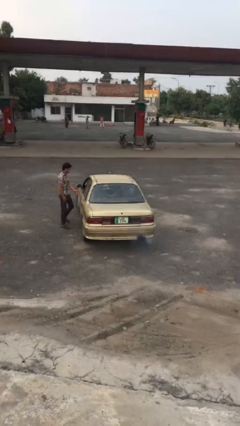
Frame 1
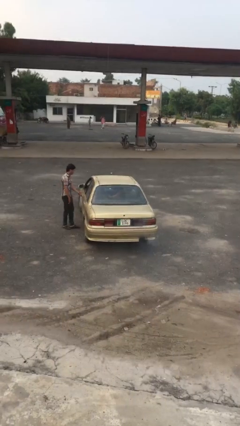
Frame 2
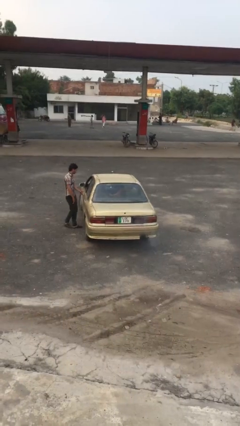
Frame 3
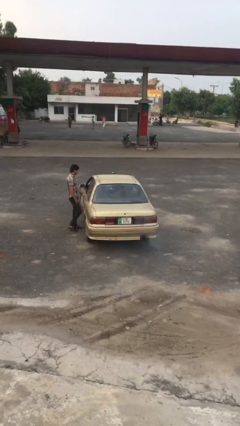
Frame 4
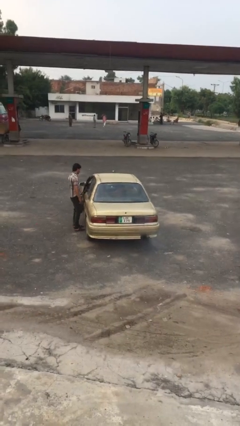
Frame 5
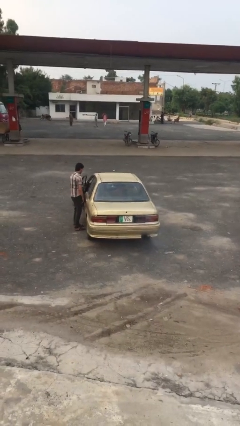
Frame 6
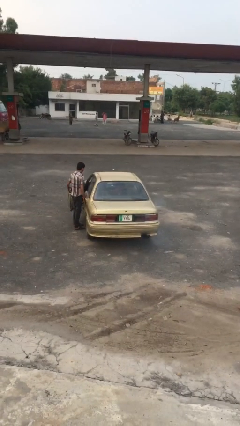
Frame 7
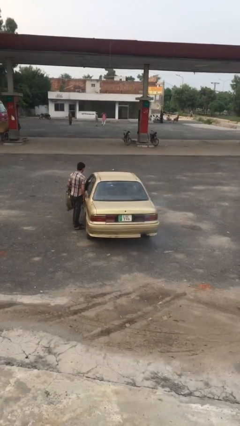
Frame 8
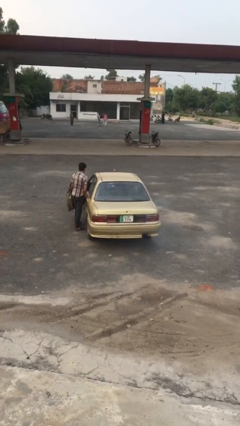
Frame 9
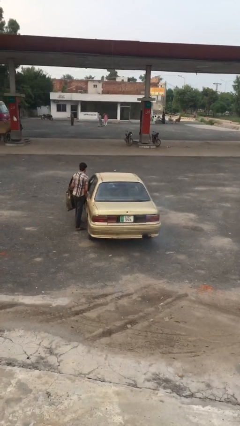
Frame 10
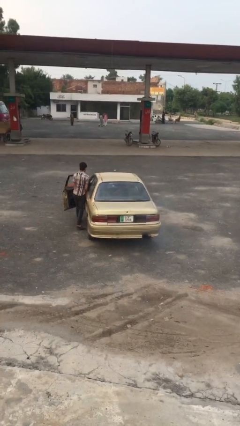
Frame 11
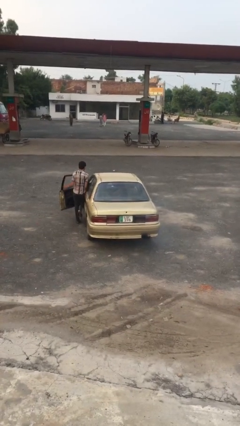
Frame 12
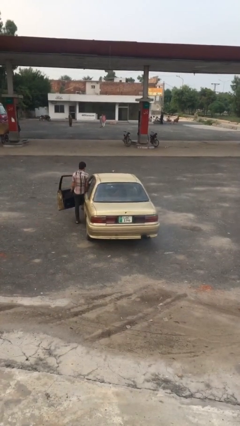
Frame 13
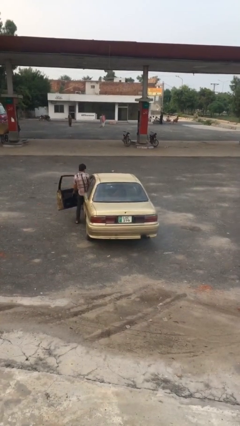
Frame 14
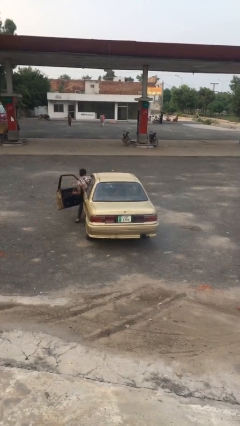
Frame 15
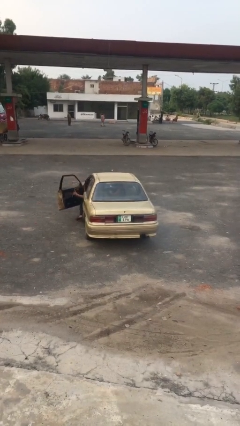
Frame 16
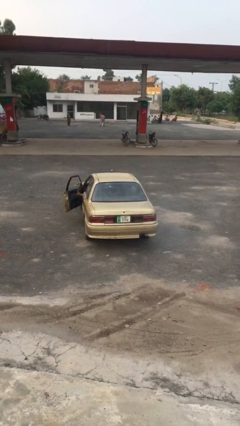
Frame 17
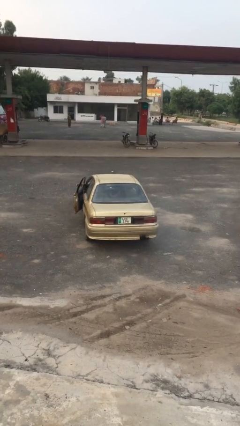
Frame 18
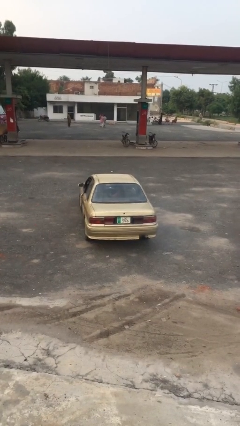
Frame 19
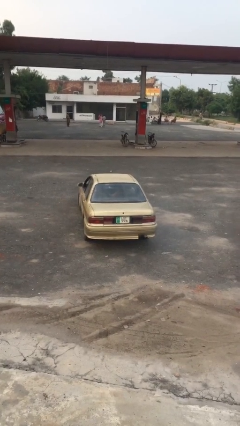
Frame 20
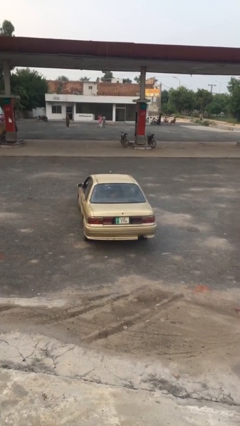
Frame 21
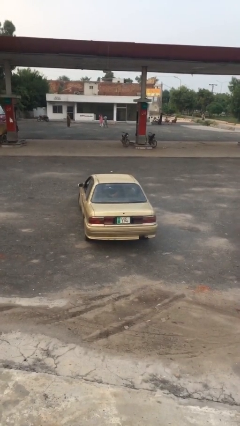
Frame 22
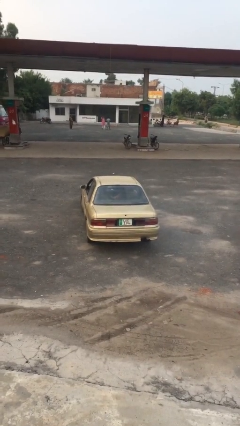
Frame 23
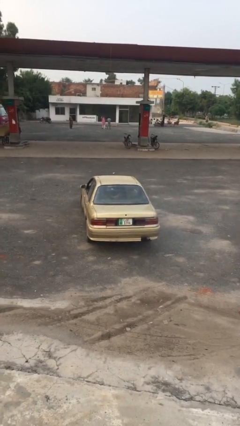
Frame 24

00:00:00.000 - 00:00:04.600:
car picks up person

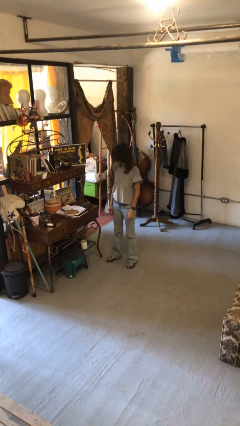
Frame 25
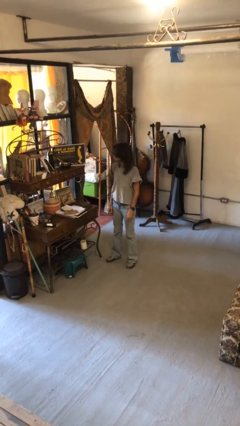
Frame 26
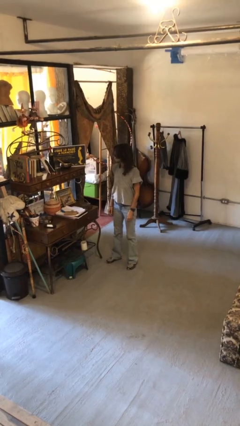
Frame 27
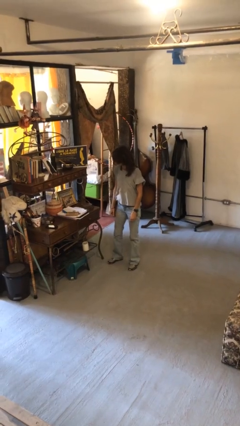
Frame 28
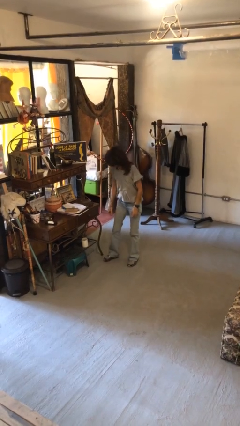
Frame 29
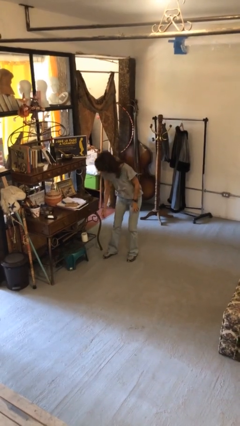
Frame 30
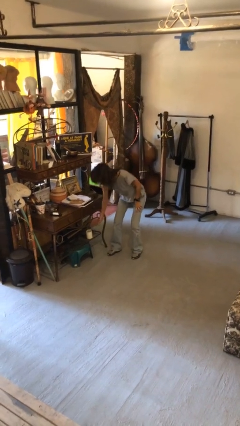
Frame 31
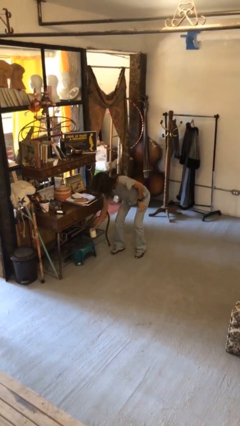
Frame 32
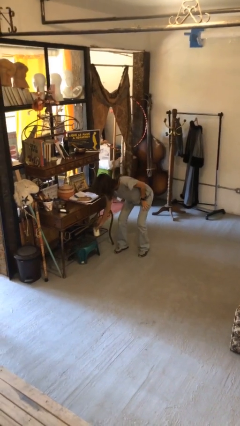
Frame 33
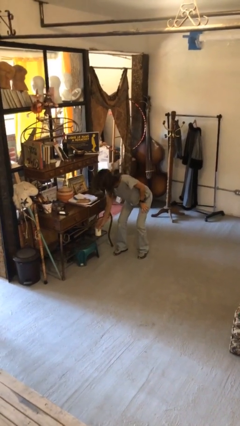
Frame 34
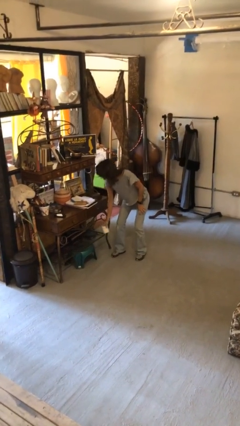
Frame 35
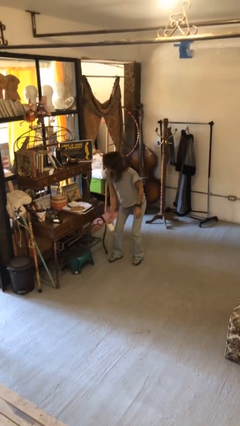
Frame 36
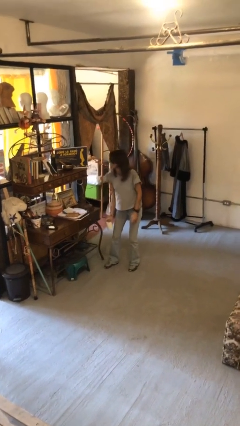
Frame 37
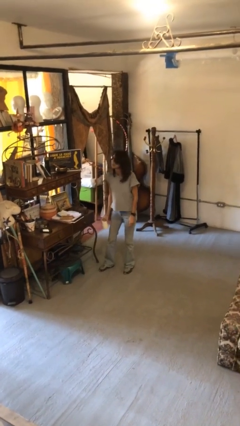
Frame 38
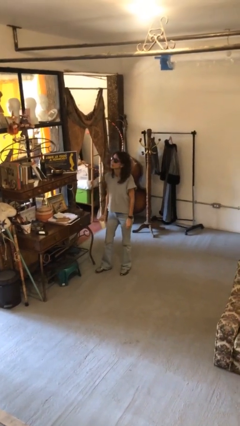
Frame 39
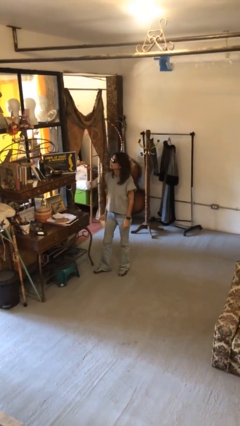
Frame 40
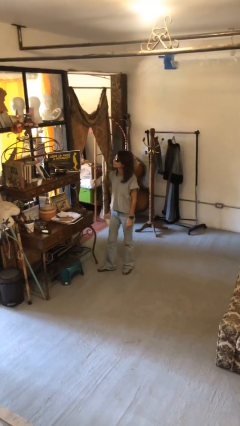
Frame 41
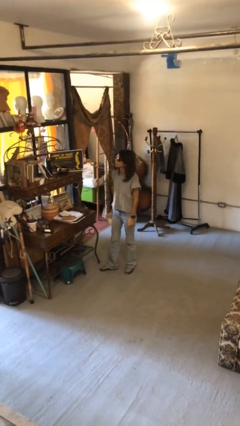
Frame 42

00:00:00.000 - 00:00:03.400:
person picks up object from cabinet

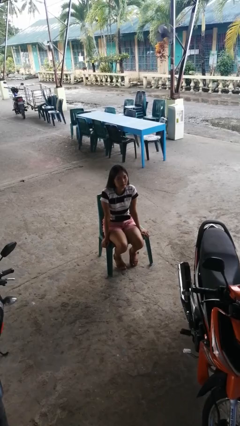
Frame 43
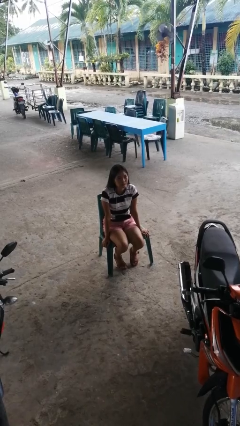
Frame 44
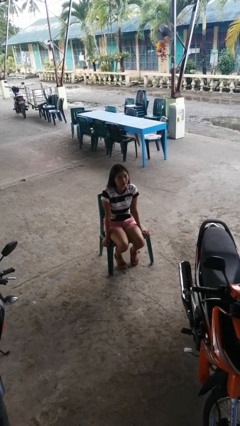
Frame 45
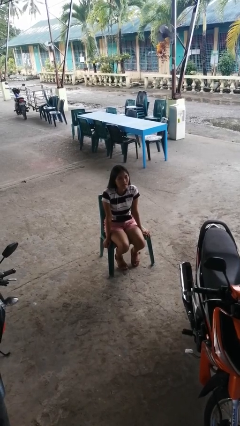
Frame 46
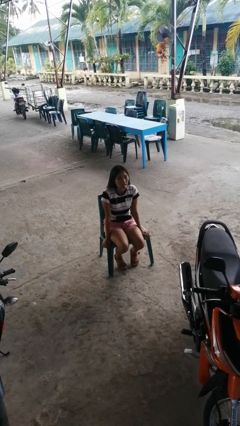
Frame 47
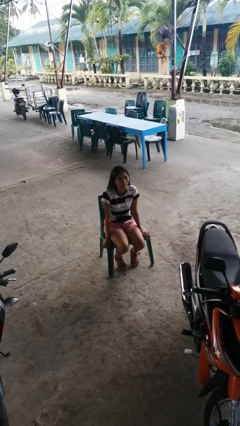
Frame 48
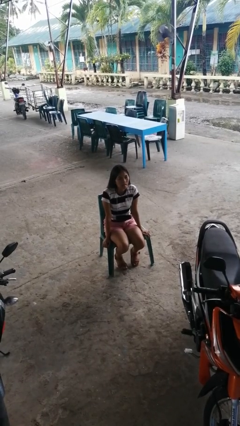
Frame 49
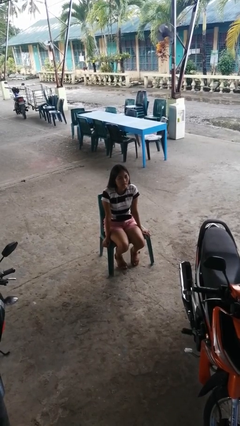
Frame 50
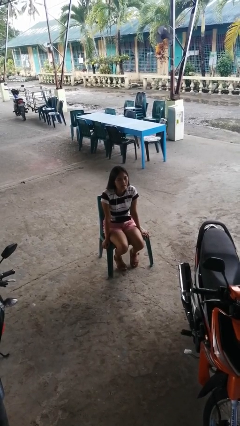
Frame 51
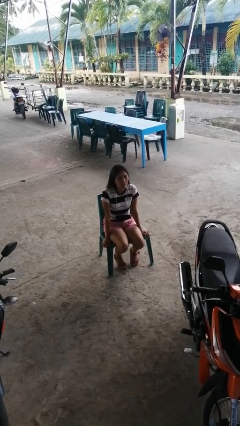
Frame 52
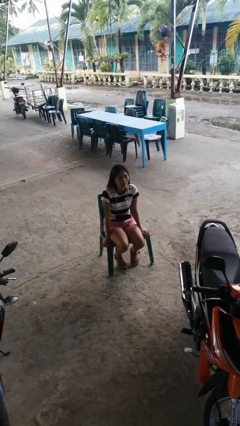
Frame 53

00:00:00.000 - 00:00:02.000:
person sticks out tongue

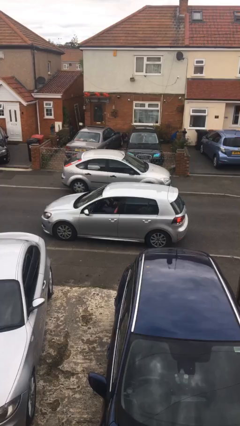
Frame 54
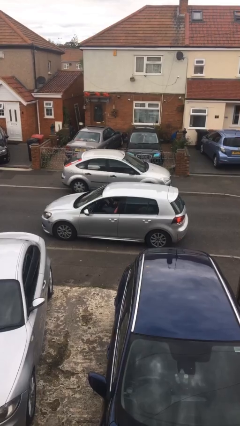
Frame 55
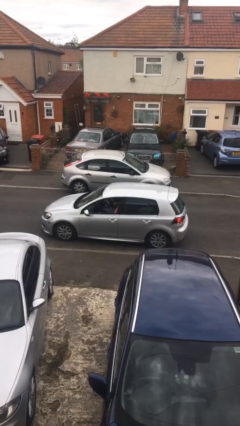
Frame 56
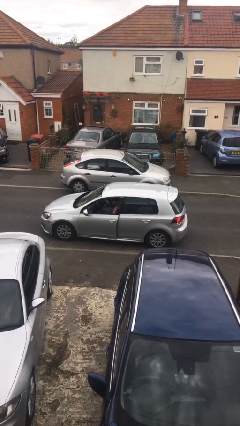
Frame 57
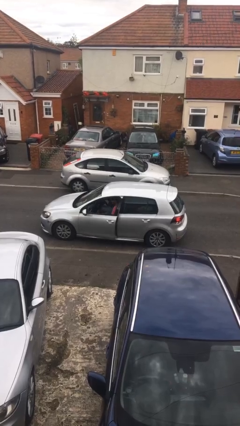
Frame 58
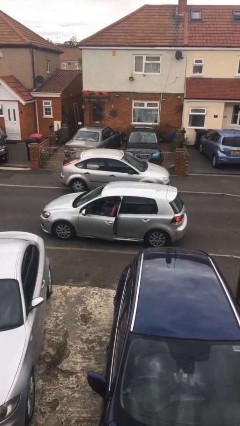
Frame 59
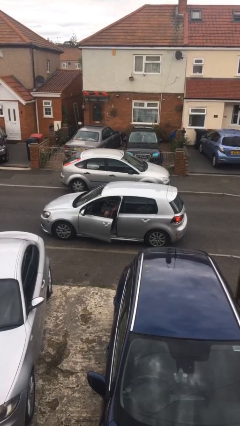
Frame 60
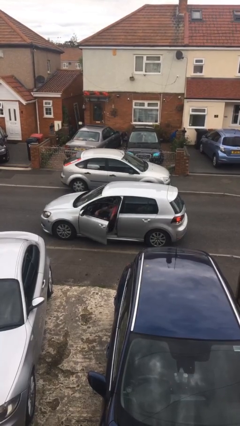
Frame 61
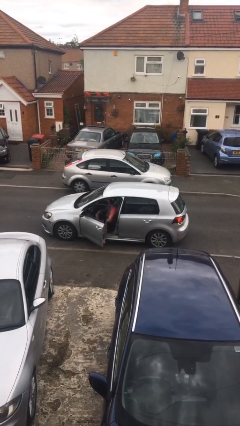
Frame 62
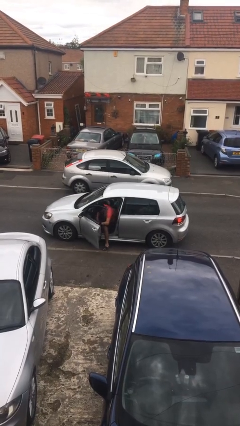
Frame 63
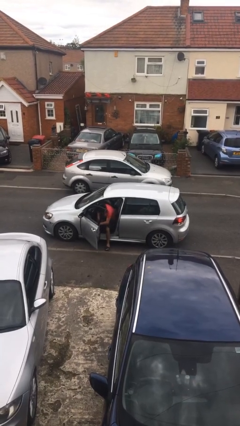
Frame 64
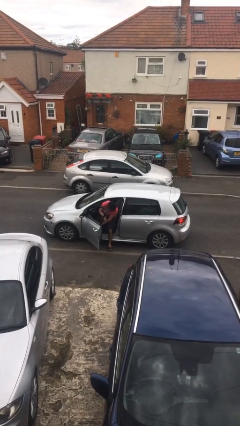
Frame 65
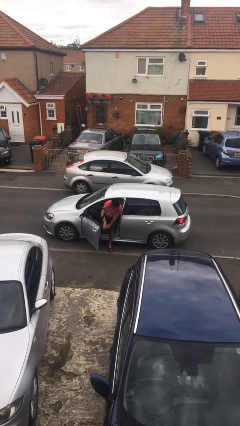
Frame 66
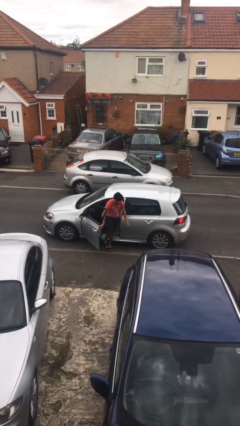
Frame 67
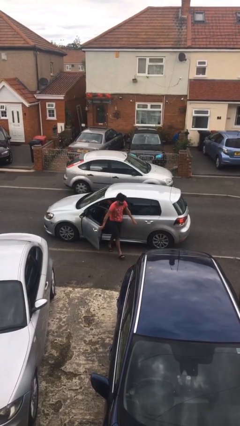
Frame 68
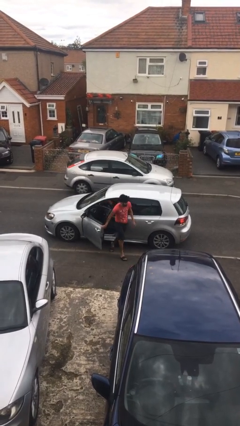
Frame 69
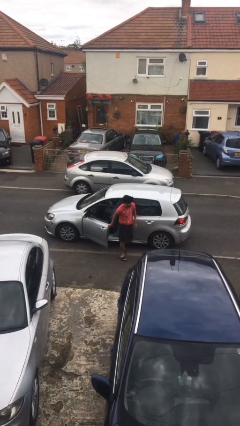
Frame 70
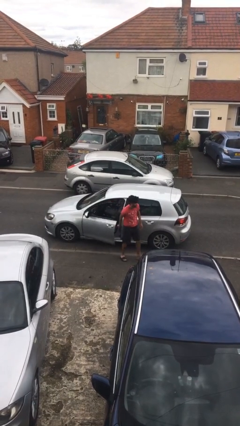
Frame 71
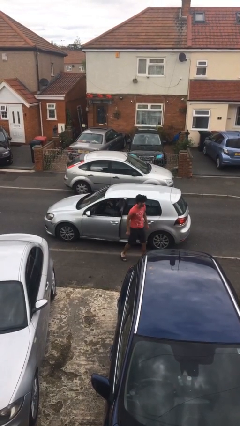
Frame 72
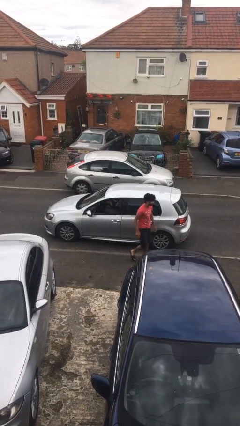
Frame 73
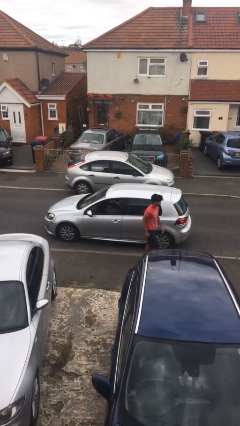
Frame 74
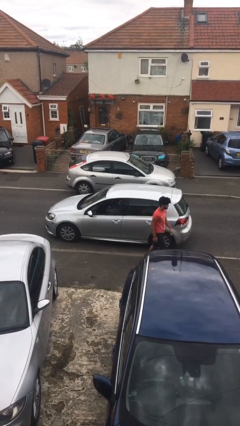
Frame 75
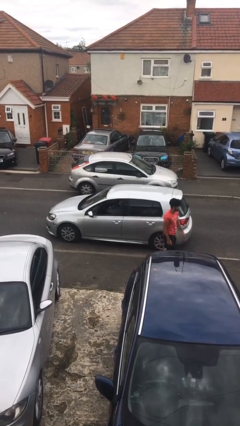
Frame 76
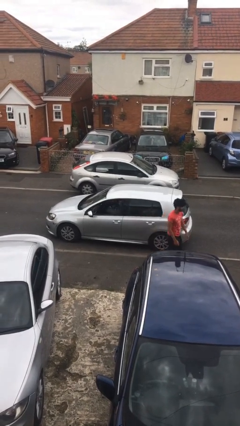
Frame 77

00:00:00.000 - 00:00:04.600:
car drops off person

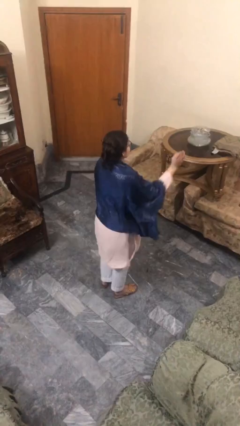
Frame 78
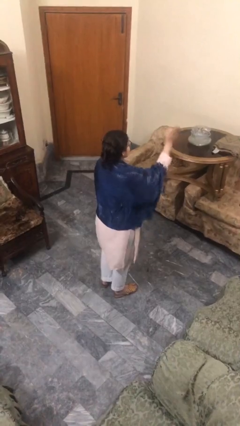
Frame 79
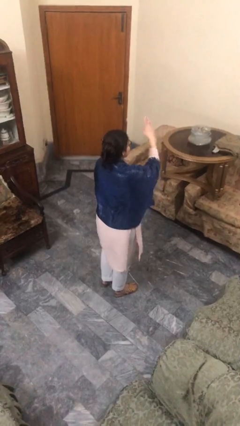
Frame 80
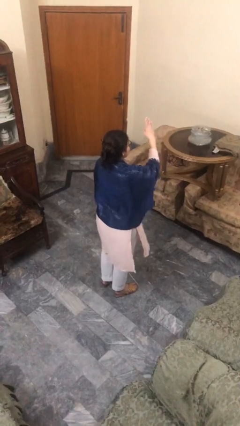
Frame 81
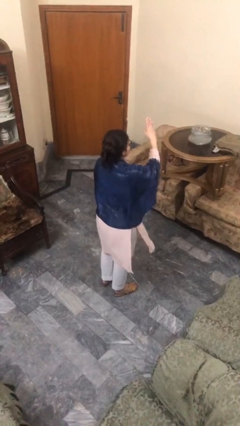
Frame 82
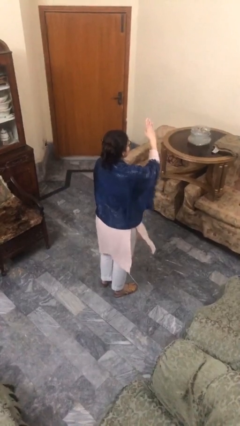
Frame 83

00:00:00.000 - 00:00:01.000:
person gestures swipe left

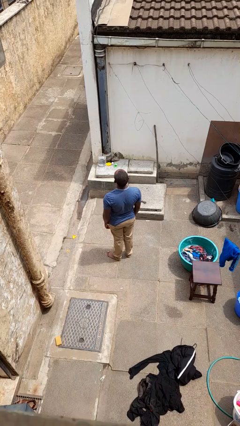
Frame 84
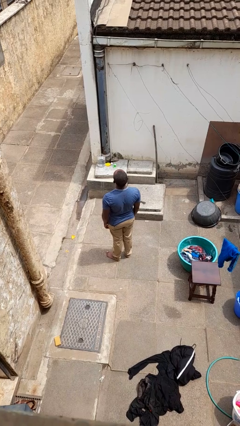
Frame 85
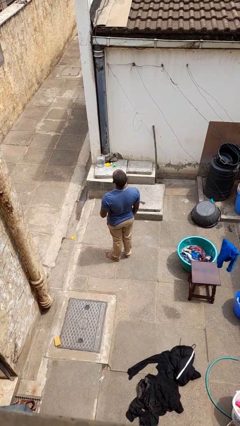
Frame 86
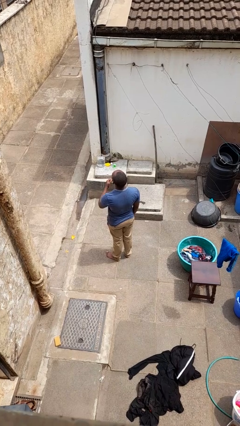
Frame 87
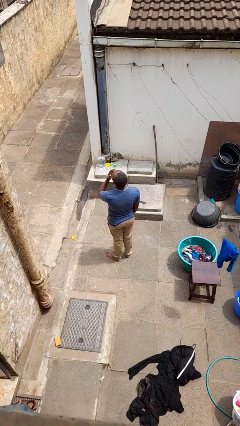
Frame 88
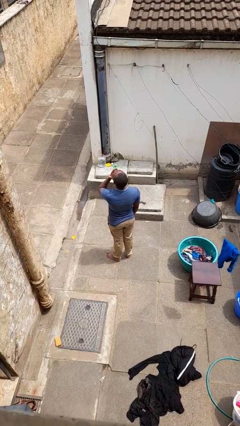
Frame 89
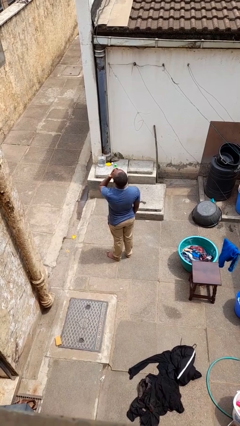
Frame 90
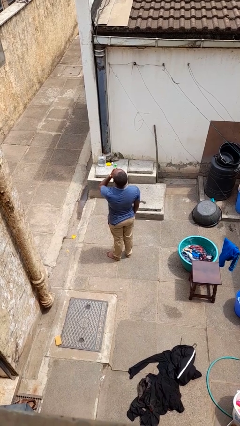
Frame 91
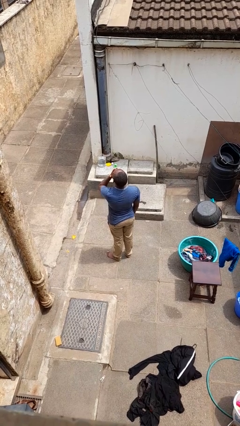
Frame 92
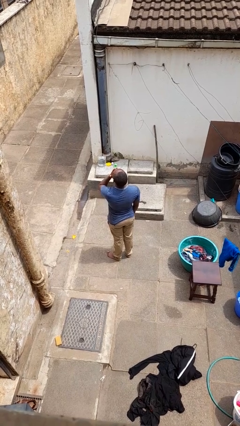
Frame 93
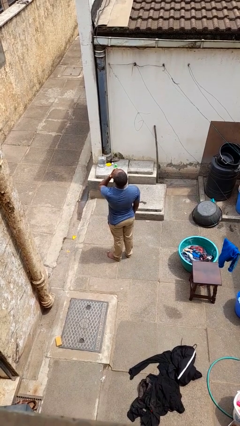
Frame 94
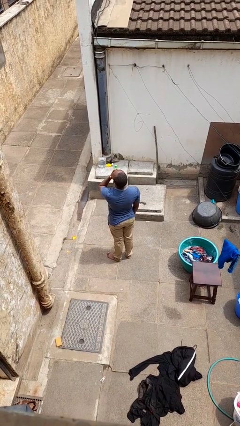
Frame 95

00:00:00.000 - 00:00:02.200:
person yawns
